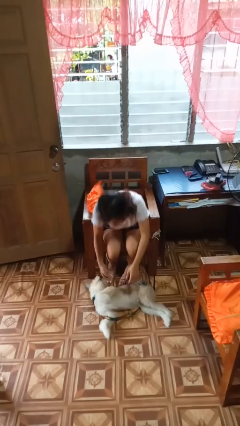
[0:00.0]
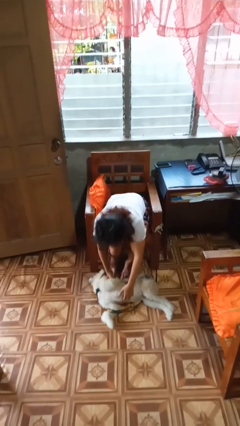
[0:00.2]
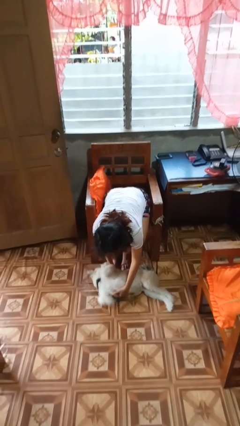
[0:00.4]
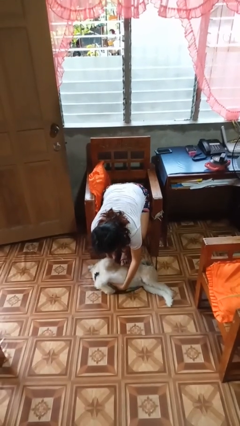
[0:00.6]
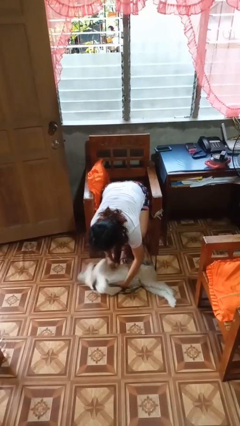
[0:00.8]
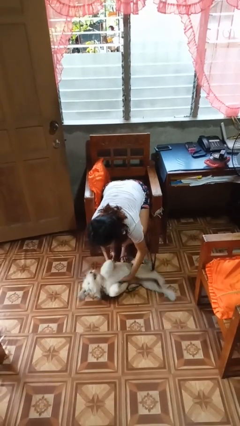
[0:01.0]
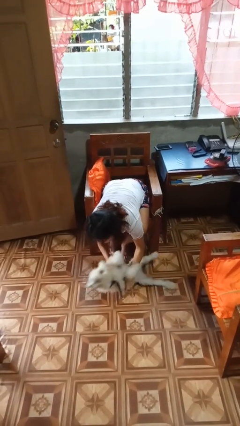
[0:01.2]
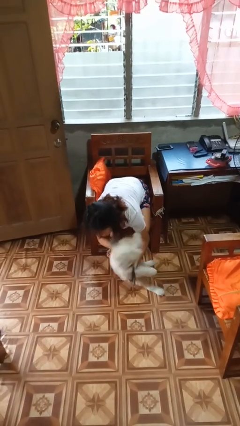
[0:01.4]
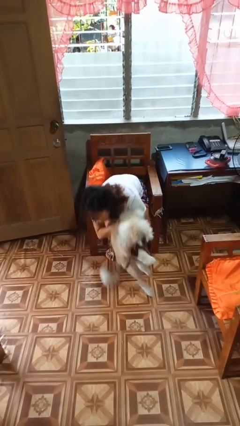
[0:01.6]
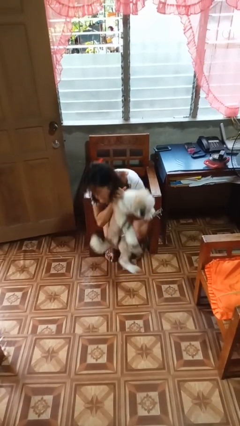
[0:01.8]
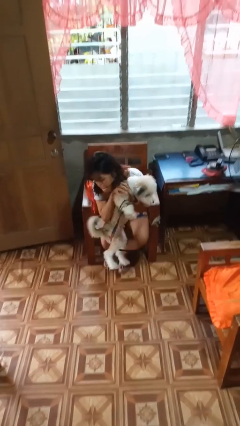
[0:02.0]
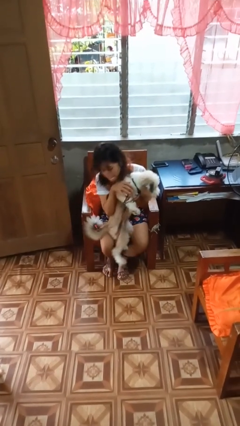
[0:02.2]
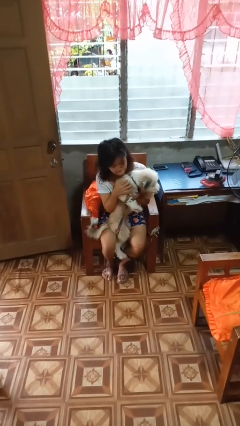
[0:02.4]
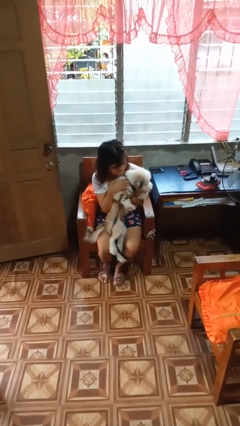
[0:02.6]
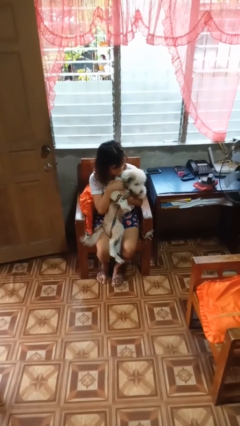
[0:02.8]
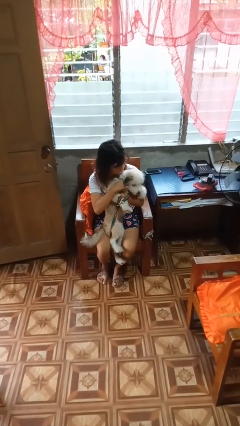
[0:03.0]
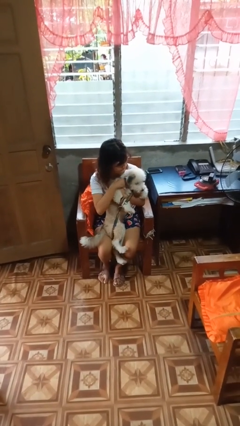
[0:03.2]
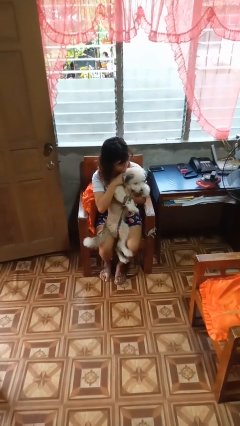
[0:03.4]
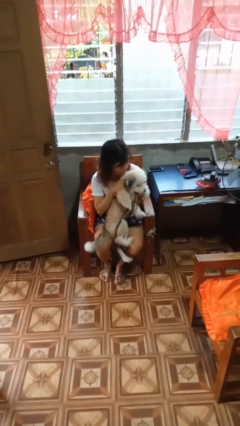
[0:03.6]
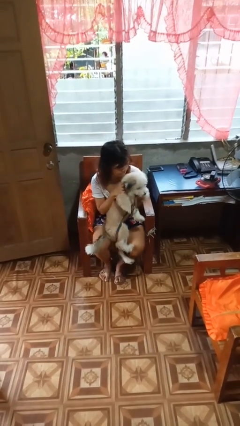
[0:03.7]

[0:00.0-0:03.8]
person hugs dog

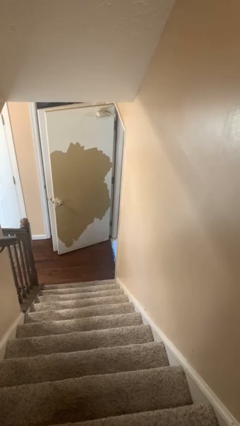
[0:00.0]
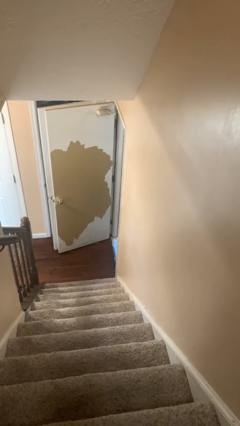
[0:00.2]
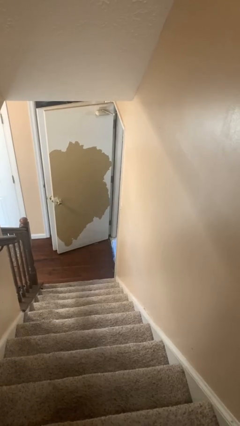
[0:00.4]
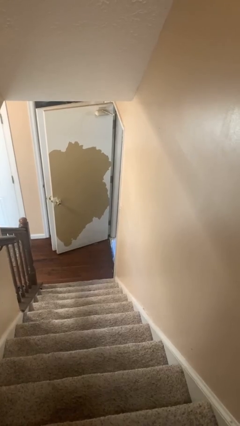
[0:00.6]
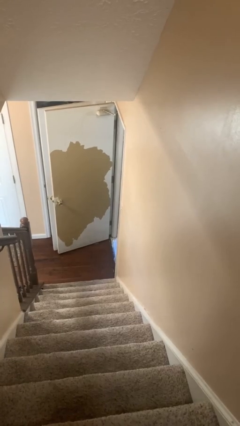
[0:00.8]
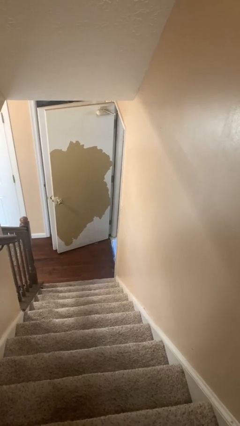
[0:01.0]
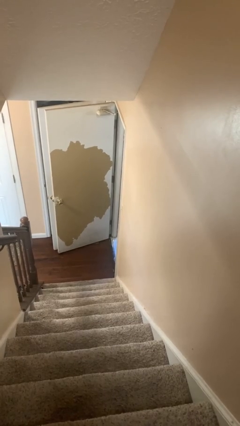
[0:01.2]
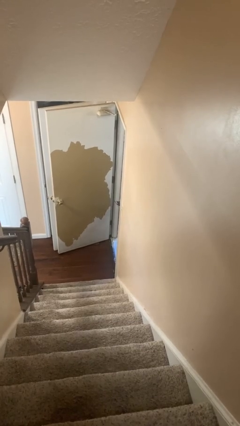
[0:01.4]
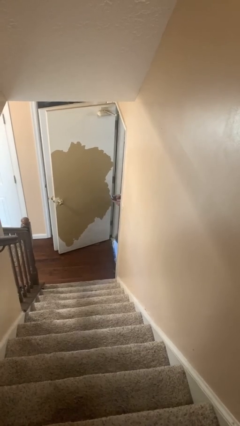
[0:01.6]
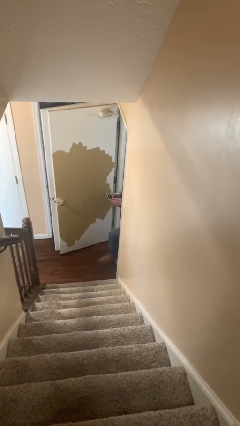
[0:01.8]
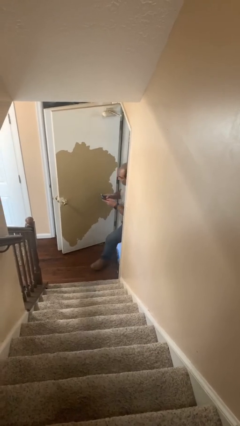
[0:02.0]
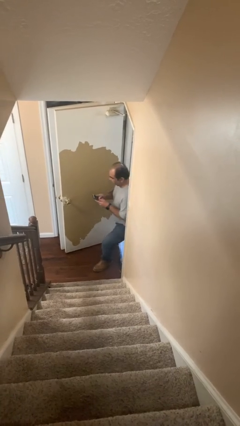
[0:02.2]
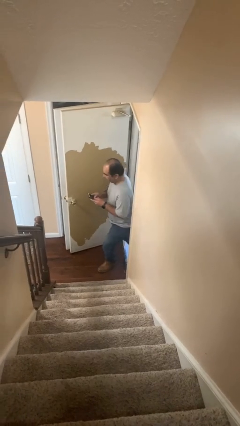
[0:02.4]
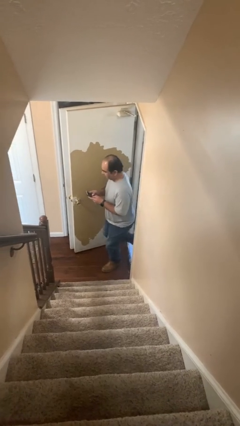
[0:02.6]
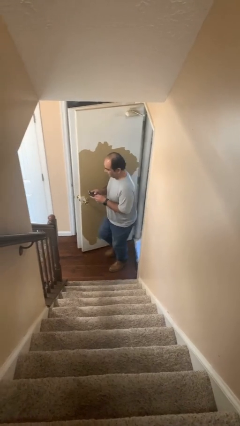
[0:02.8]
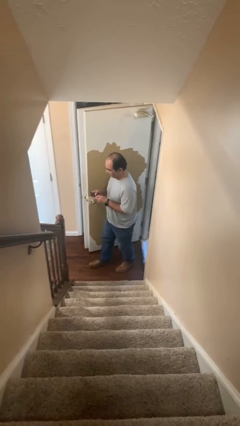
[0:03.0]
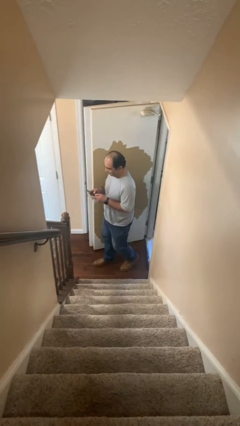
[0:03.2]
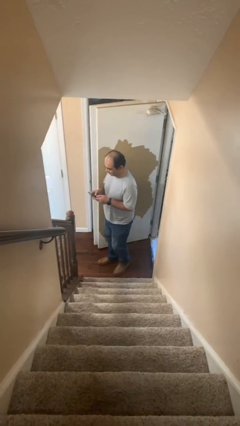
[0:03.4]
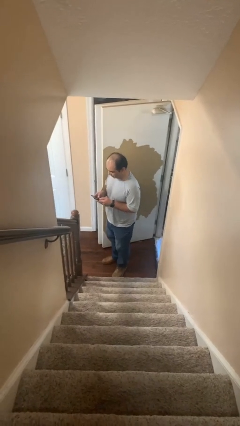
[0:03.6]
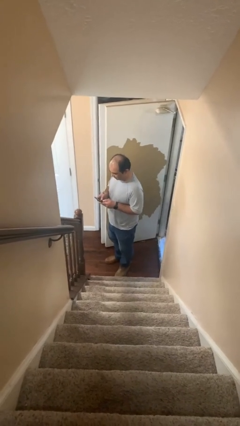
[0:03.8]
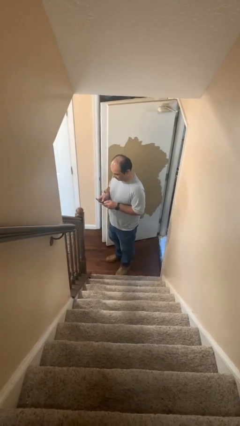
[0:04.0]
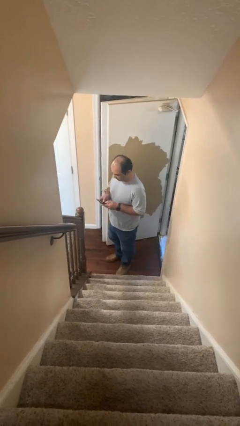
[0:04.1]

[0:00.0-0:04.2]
person enters scene through structure

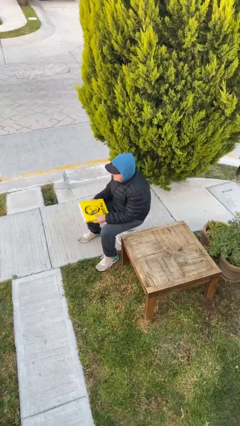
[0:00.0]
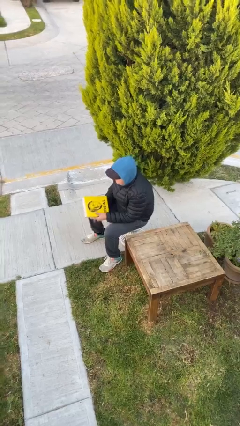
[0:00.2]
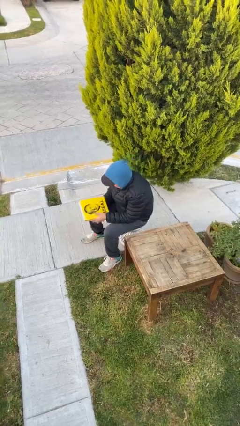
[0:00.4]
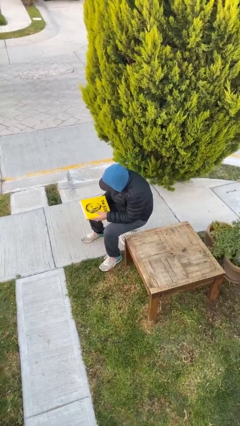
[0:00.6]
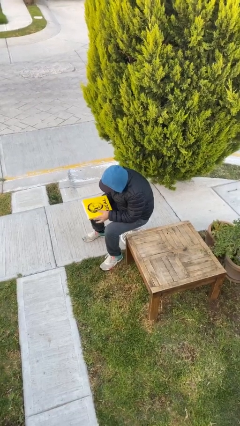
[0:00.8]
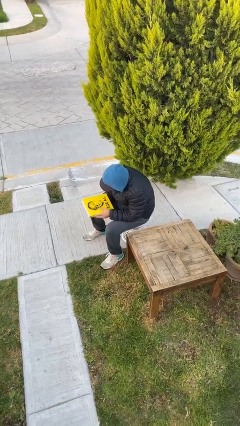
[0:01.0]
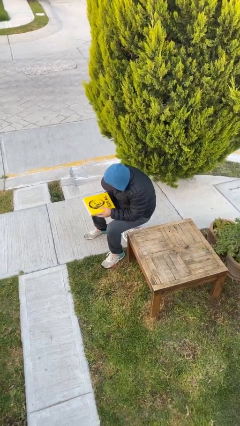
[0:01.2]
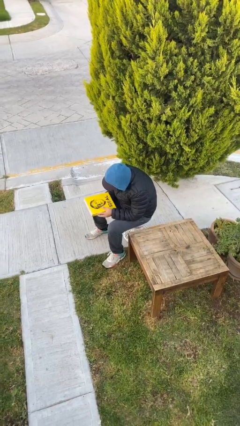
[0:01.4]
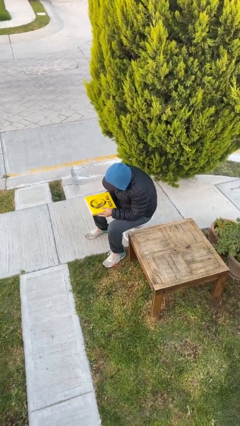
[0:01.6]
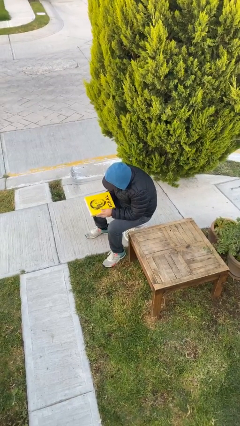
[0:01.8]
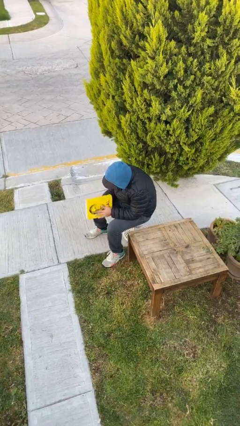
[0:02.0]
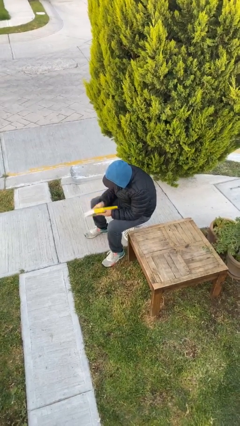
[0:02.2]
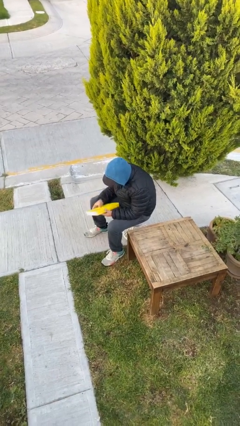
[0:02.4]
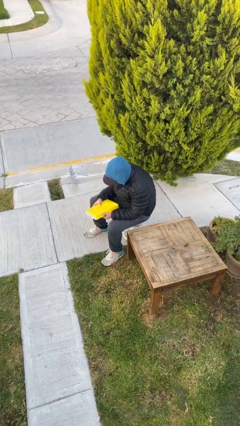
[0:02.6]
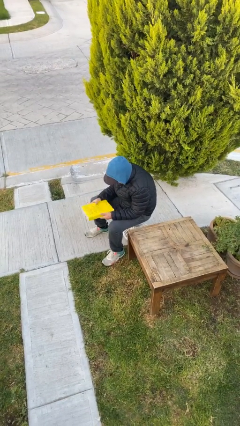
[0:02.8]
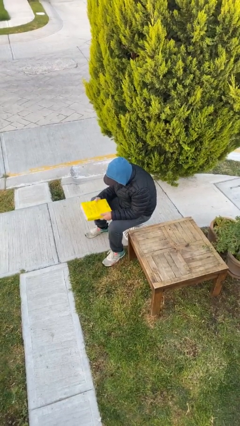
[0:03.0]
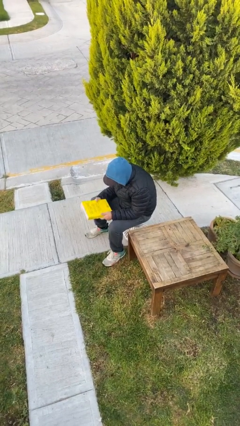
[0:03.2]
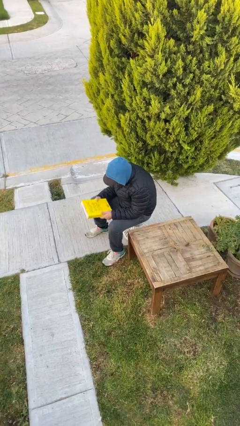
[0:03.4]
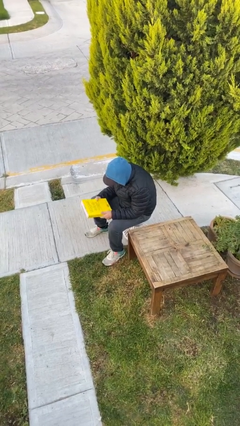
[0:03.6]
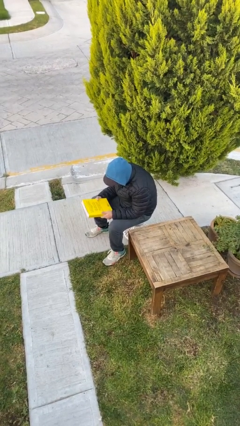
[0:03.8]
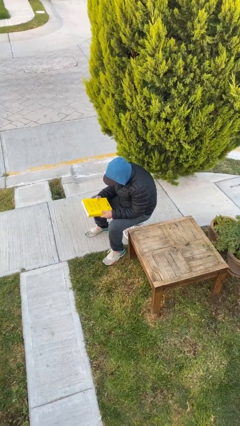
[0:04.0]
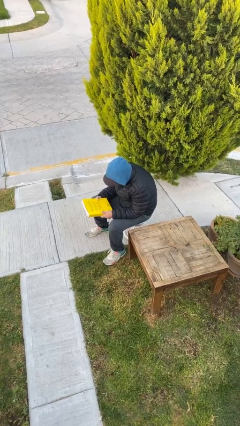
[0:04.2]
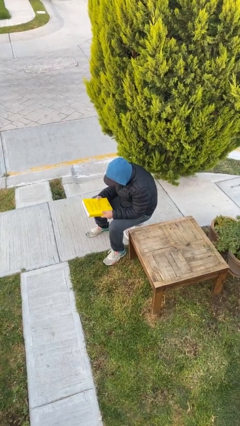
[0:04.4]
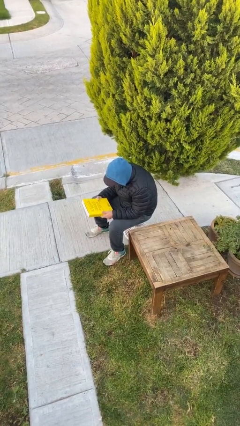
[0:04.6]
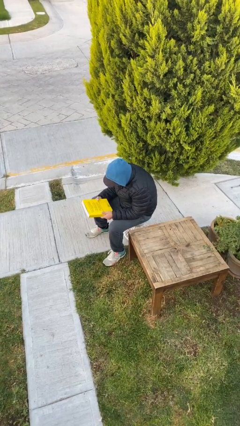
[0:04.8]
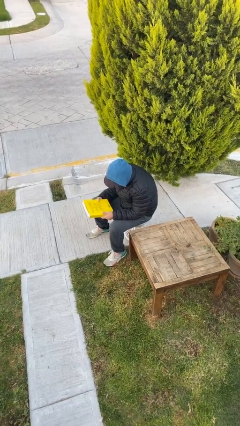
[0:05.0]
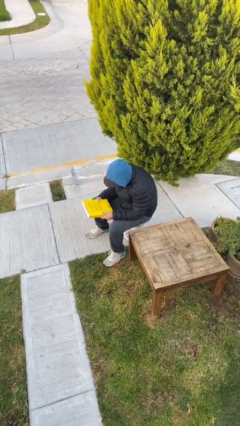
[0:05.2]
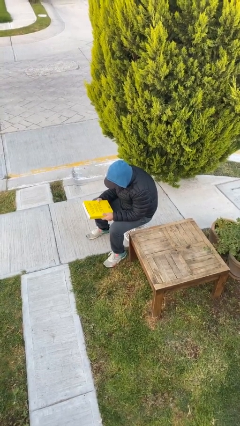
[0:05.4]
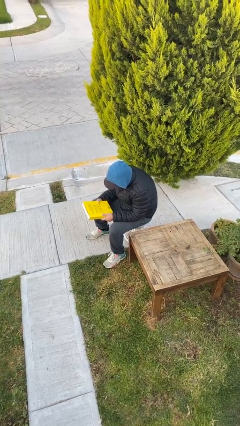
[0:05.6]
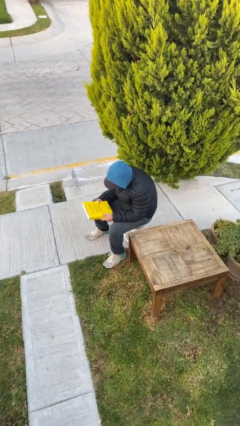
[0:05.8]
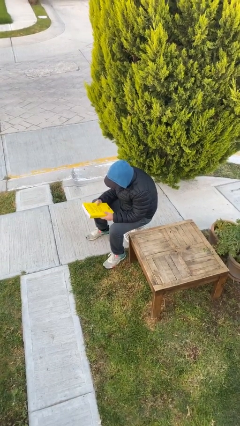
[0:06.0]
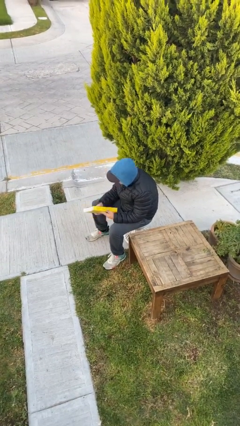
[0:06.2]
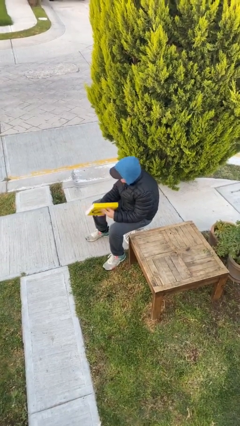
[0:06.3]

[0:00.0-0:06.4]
person reads document

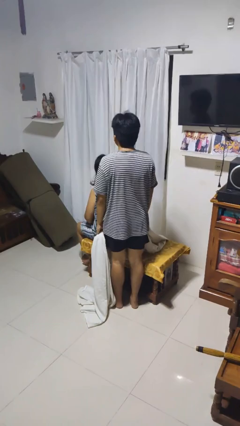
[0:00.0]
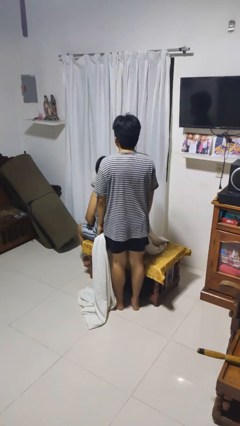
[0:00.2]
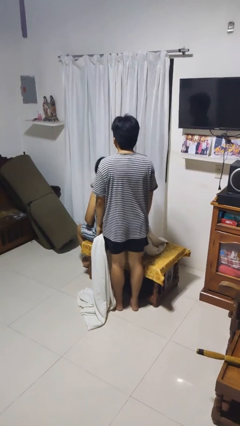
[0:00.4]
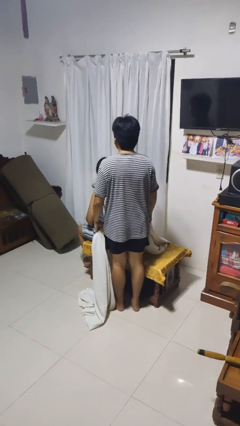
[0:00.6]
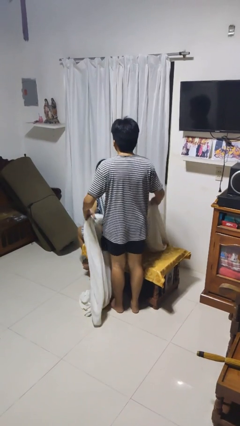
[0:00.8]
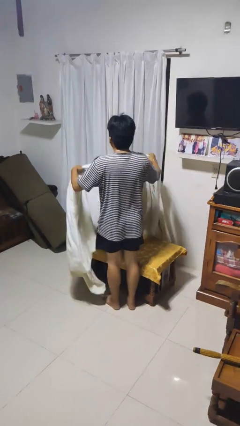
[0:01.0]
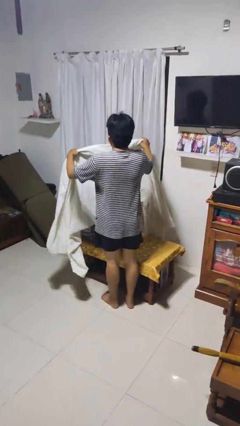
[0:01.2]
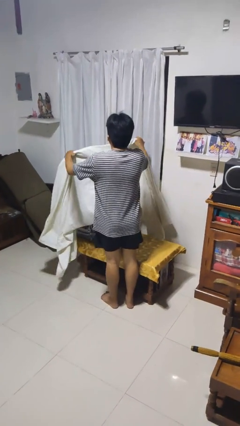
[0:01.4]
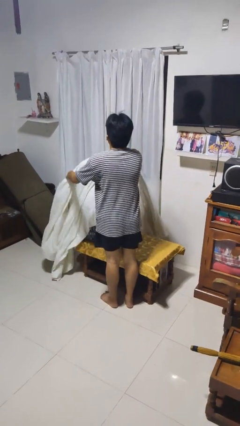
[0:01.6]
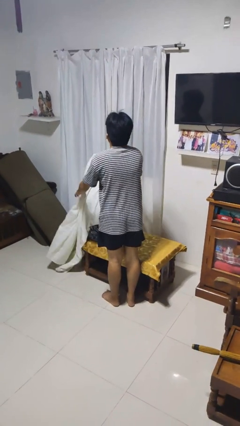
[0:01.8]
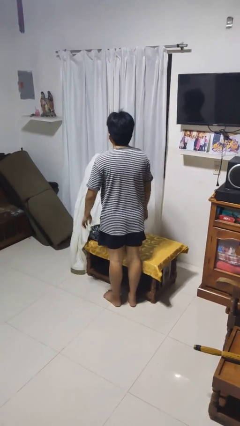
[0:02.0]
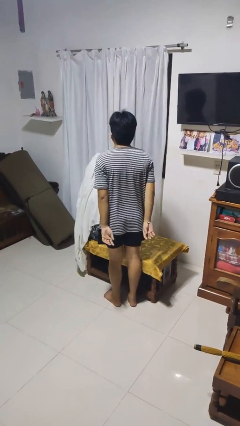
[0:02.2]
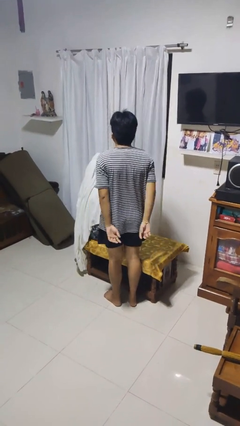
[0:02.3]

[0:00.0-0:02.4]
person covers friend with blanket

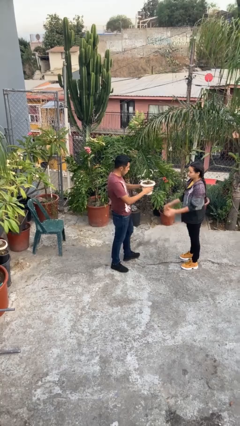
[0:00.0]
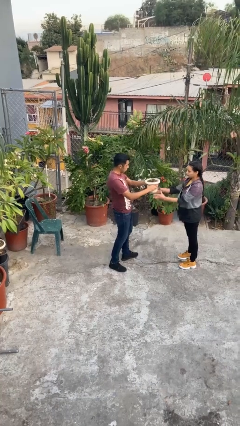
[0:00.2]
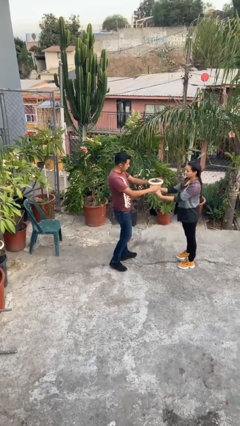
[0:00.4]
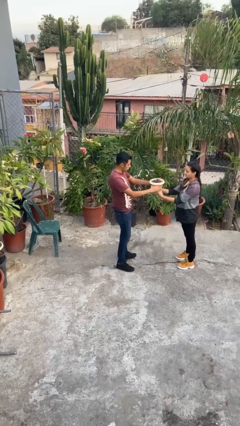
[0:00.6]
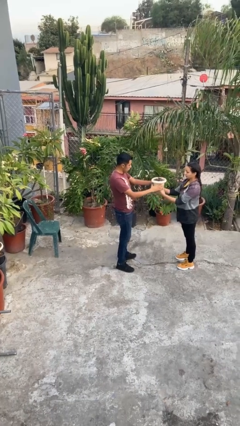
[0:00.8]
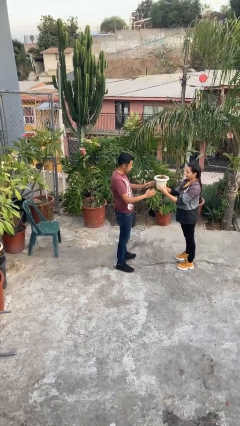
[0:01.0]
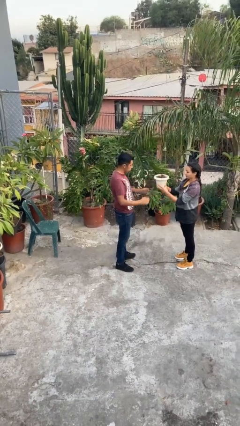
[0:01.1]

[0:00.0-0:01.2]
person transfers object to person
